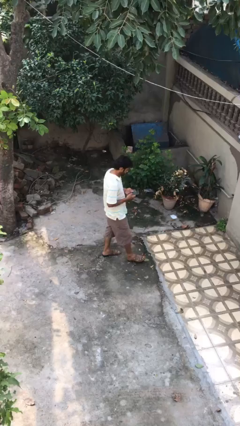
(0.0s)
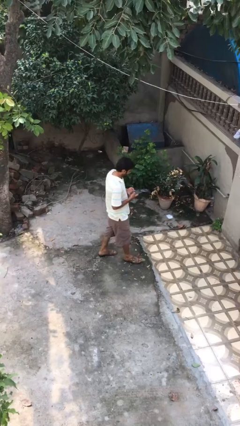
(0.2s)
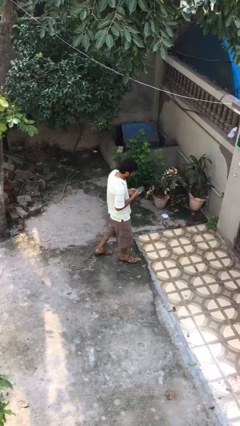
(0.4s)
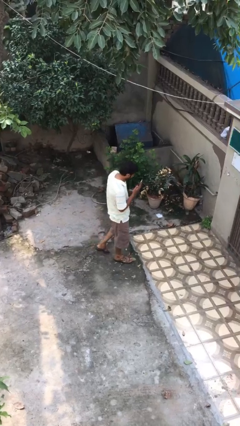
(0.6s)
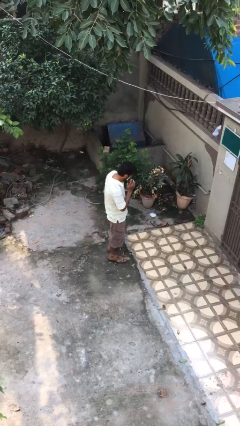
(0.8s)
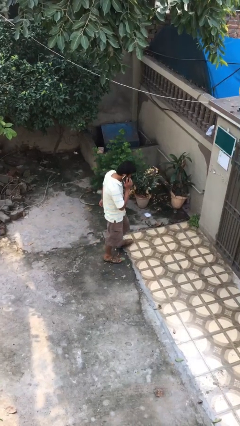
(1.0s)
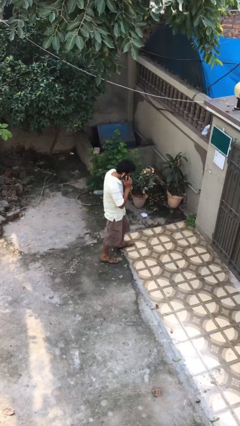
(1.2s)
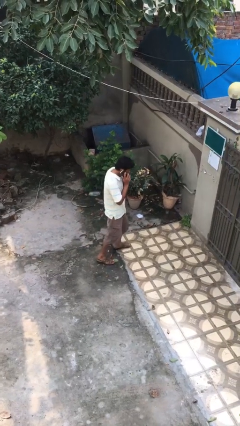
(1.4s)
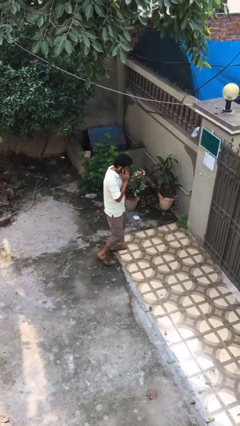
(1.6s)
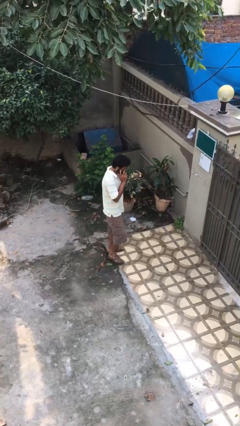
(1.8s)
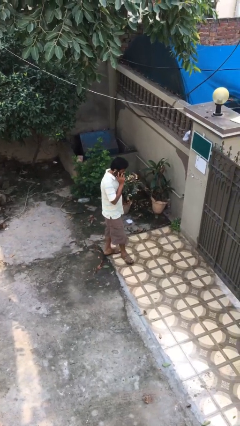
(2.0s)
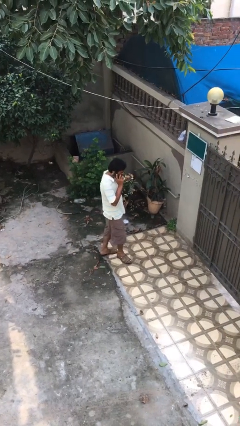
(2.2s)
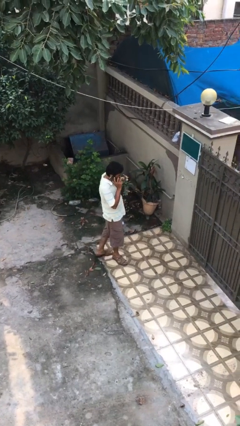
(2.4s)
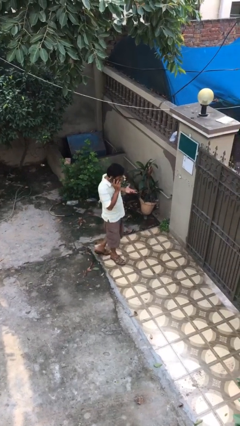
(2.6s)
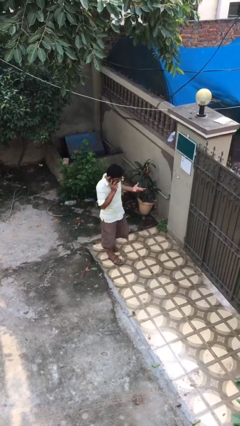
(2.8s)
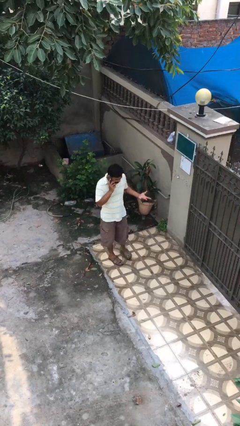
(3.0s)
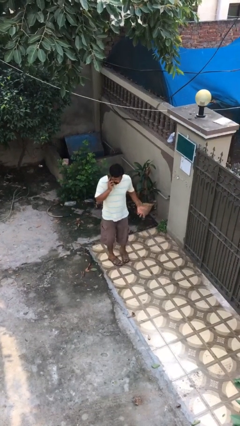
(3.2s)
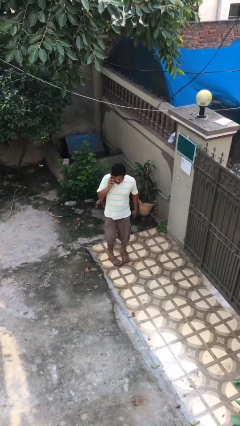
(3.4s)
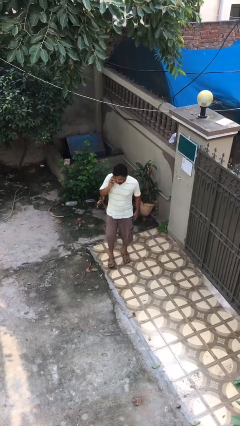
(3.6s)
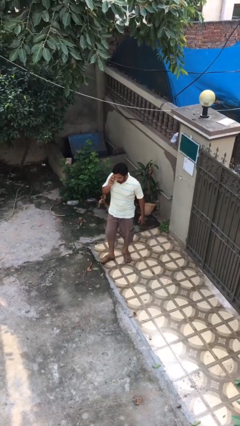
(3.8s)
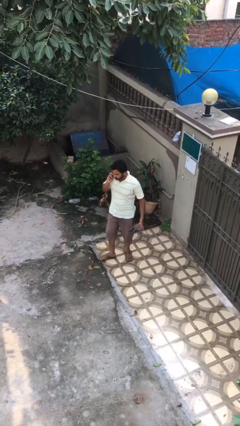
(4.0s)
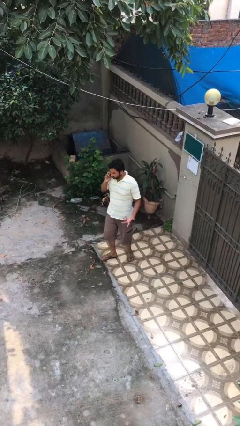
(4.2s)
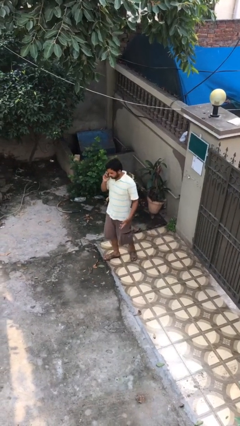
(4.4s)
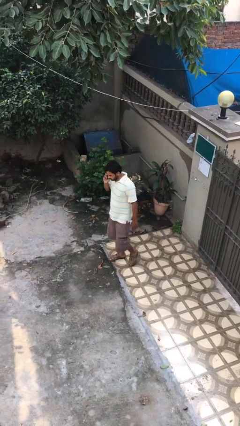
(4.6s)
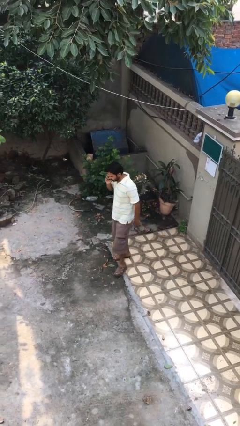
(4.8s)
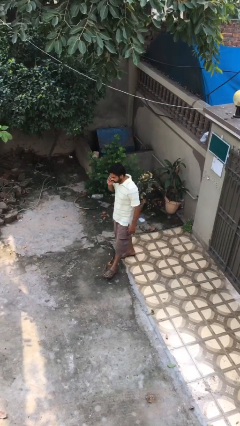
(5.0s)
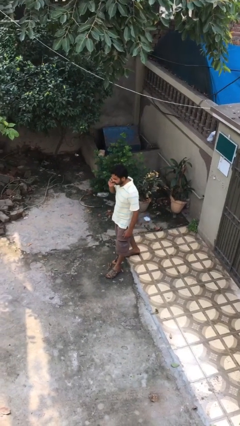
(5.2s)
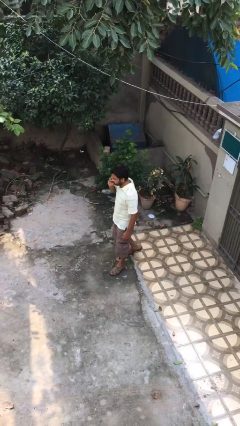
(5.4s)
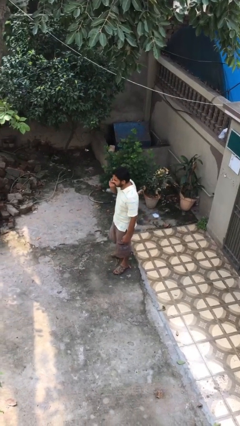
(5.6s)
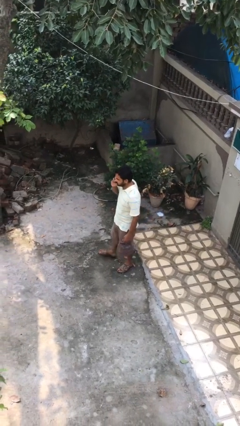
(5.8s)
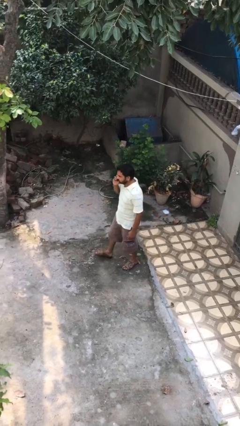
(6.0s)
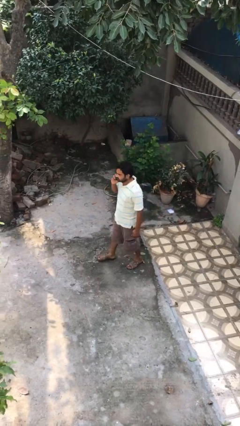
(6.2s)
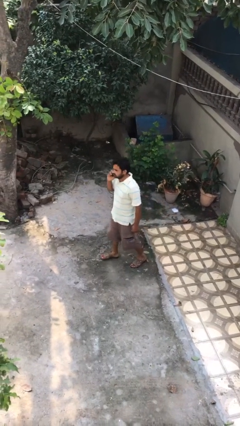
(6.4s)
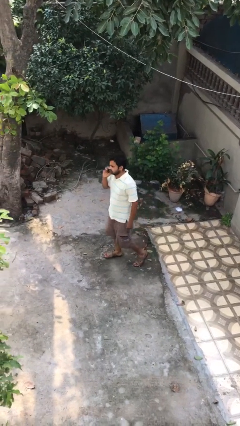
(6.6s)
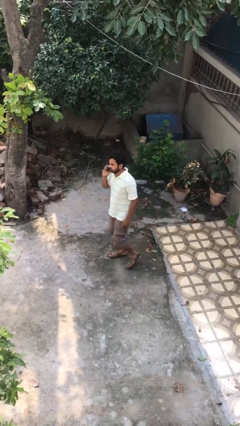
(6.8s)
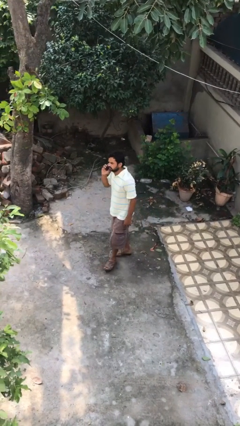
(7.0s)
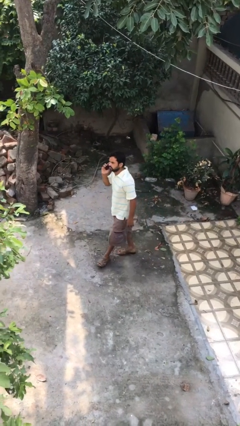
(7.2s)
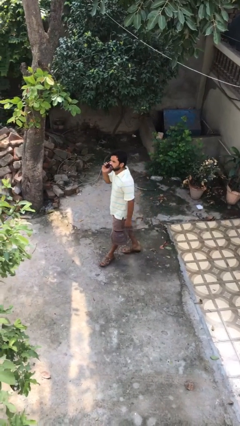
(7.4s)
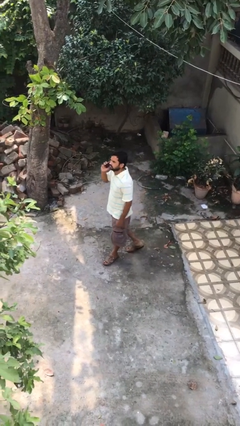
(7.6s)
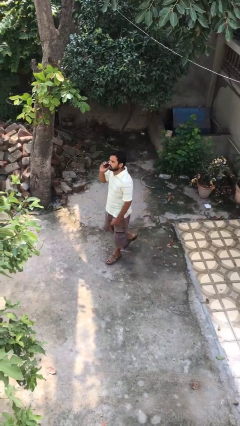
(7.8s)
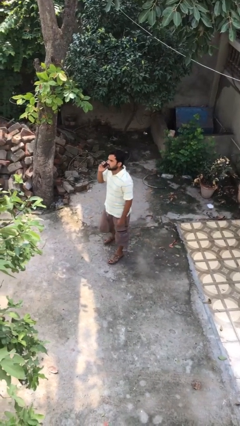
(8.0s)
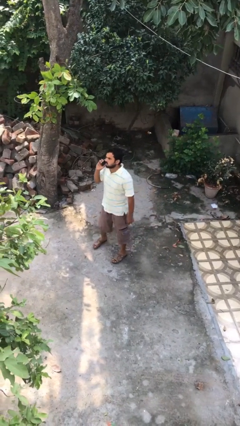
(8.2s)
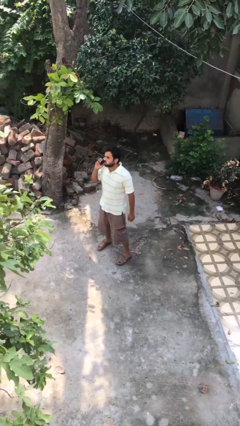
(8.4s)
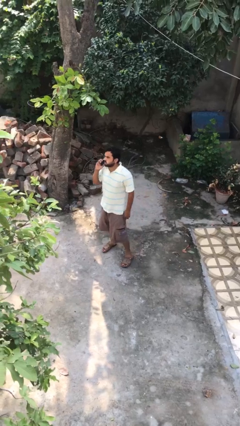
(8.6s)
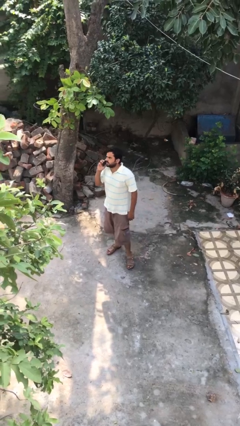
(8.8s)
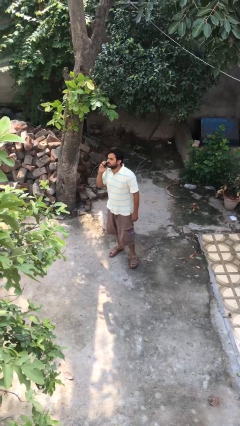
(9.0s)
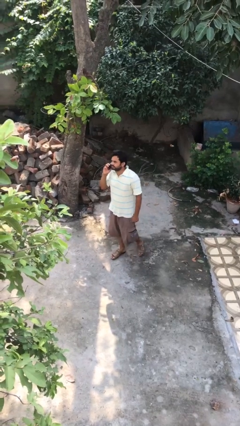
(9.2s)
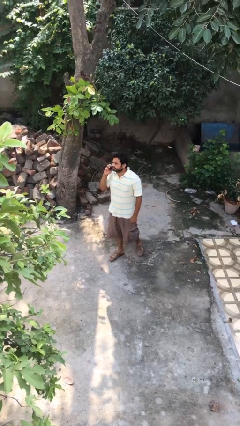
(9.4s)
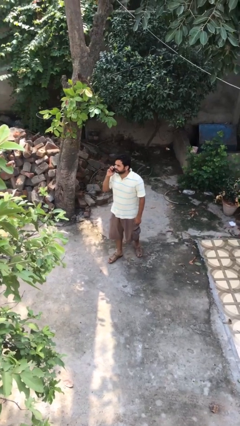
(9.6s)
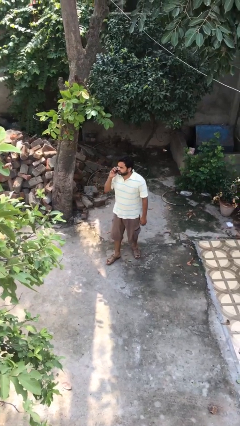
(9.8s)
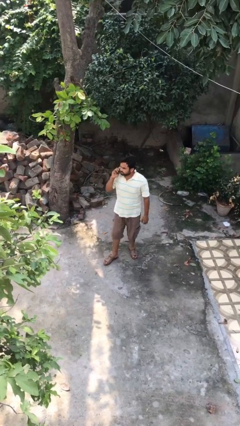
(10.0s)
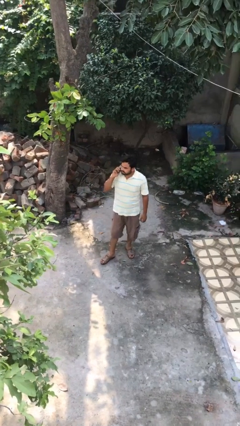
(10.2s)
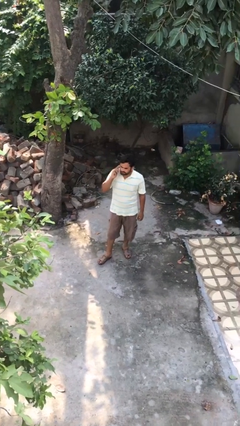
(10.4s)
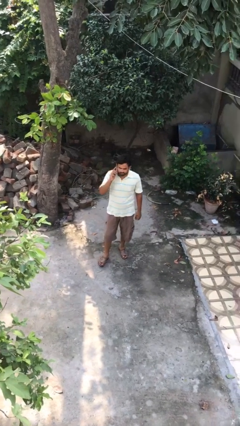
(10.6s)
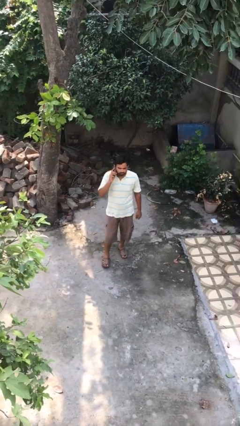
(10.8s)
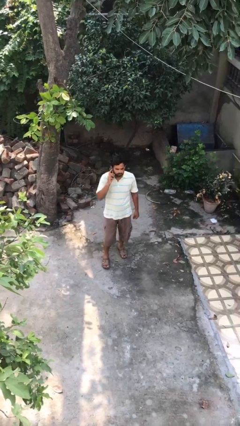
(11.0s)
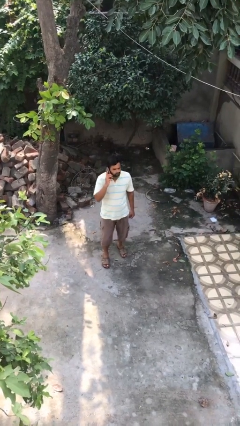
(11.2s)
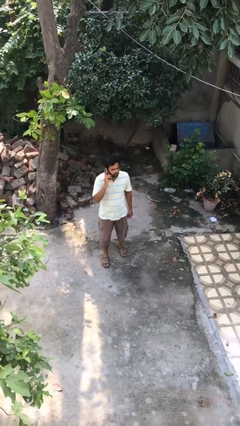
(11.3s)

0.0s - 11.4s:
person talks on phone

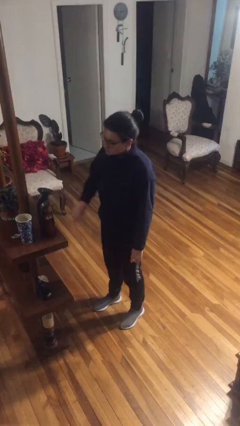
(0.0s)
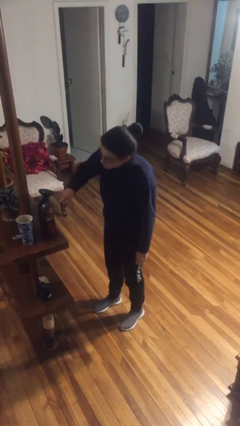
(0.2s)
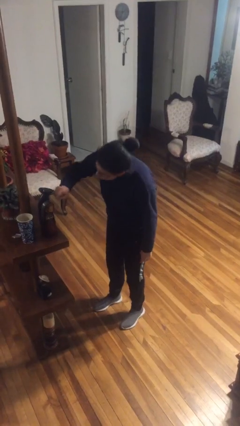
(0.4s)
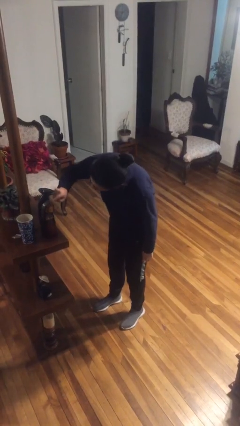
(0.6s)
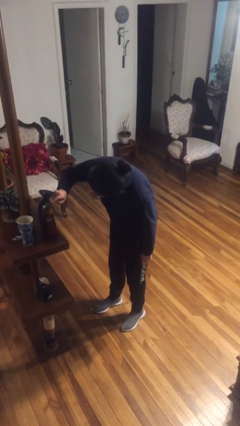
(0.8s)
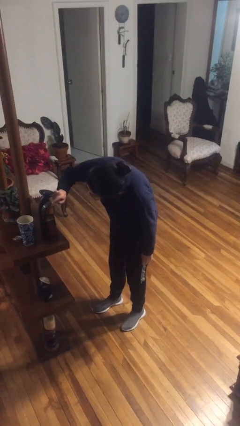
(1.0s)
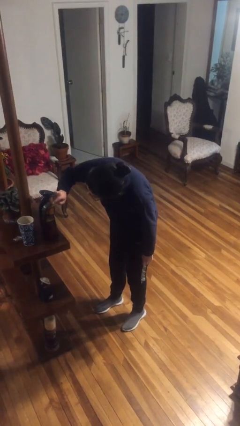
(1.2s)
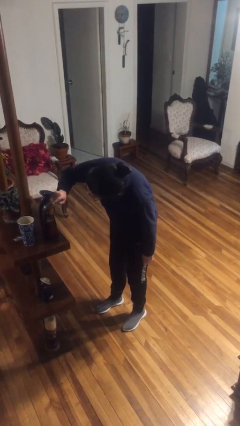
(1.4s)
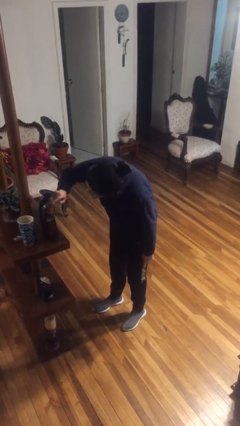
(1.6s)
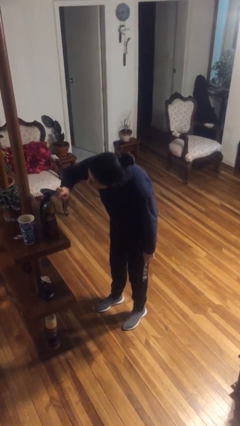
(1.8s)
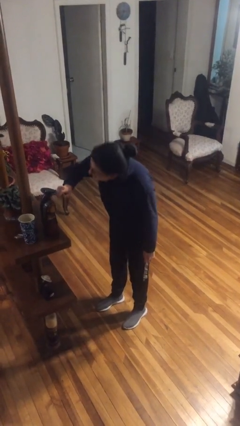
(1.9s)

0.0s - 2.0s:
person taps object with finger

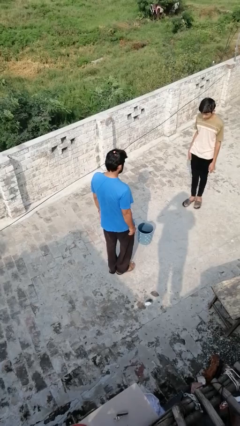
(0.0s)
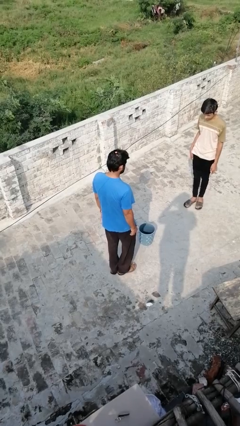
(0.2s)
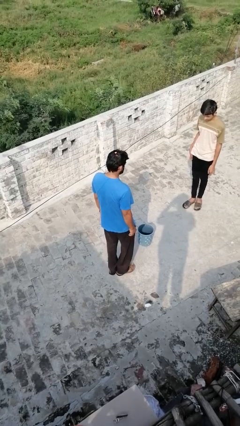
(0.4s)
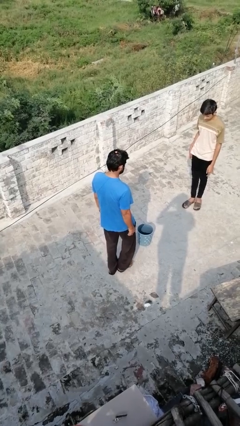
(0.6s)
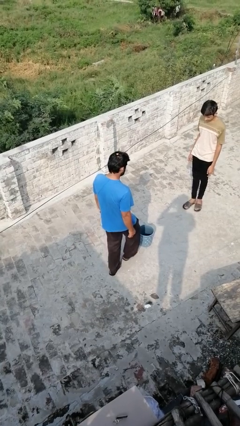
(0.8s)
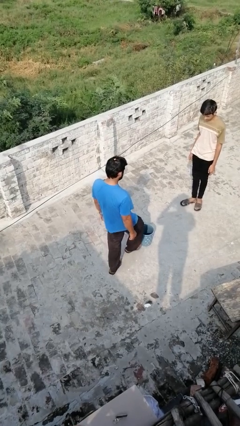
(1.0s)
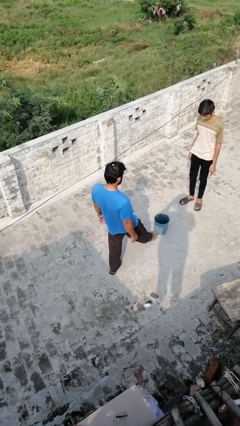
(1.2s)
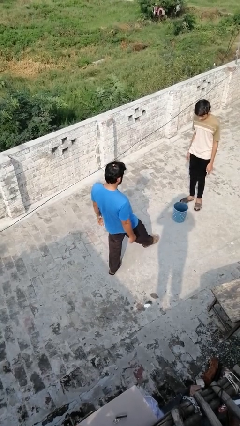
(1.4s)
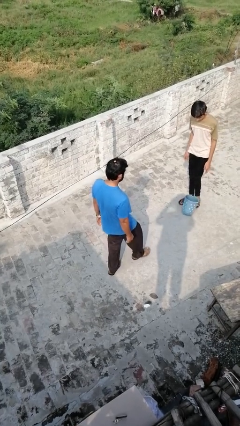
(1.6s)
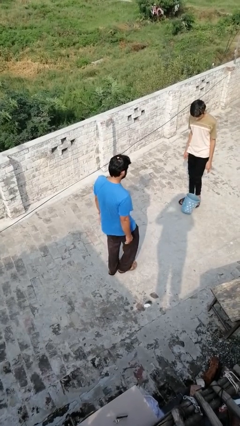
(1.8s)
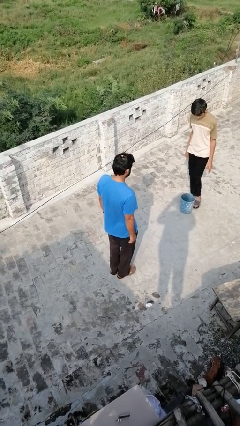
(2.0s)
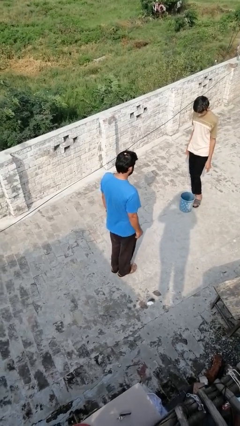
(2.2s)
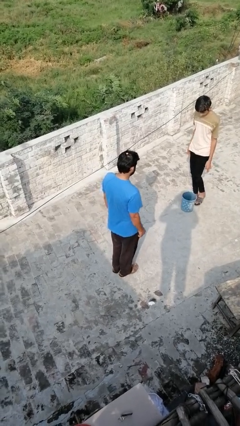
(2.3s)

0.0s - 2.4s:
person kicks object to person

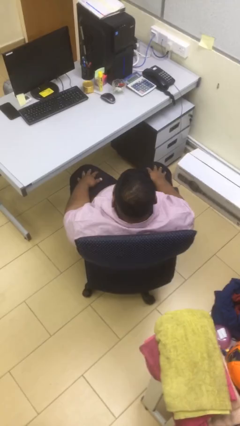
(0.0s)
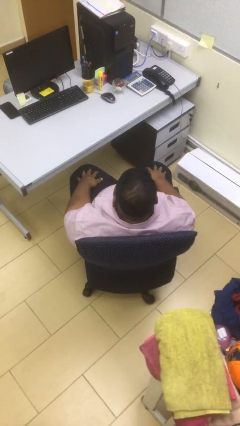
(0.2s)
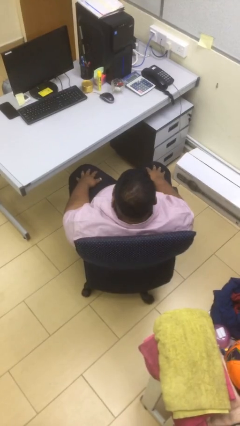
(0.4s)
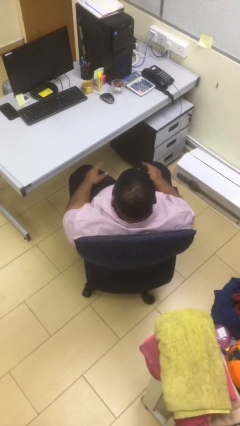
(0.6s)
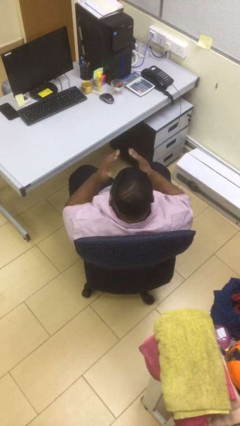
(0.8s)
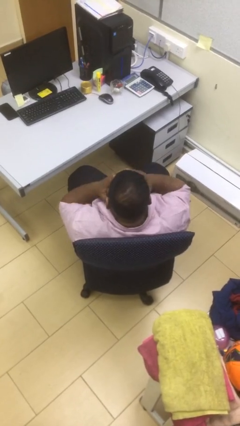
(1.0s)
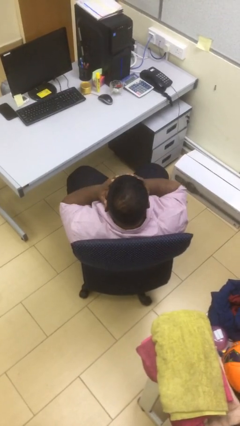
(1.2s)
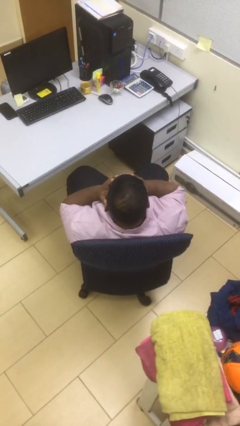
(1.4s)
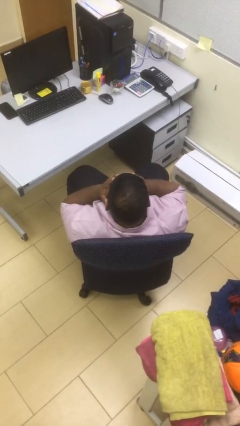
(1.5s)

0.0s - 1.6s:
person covers face with hands
